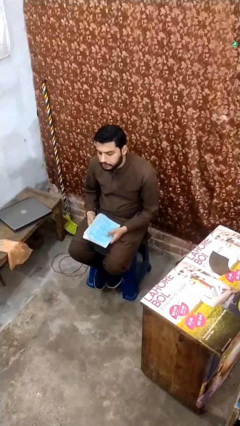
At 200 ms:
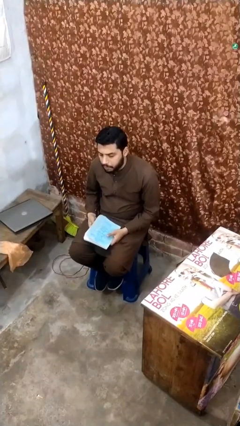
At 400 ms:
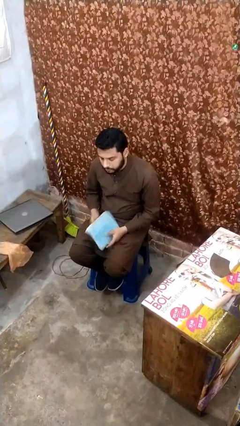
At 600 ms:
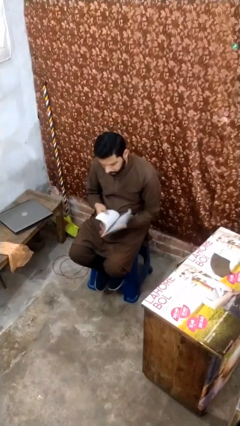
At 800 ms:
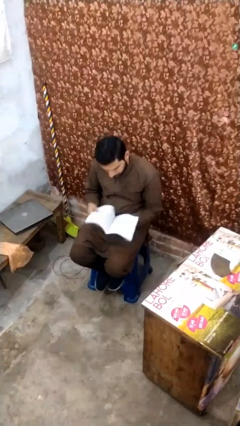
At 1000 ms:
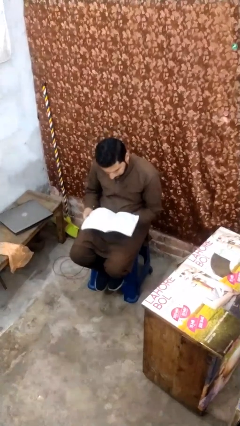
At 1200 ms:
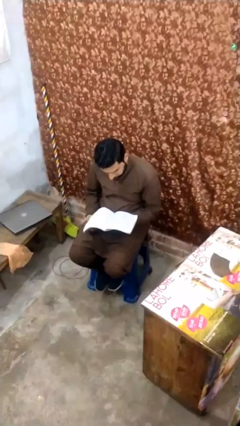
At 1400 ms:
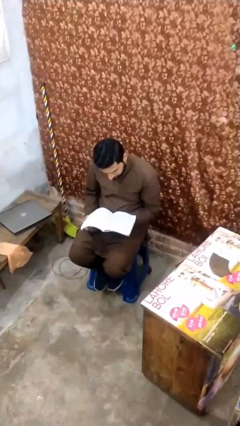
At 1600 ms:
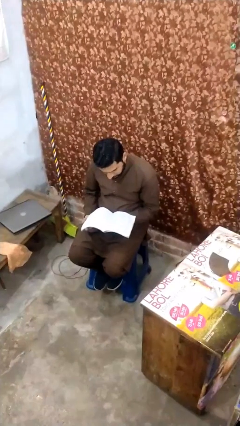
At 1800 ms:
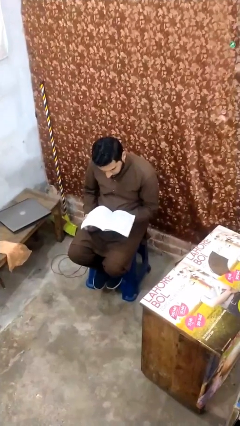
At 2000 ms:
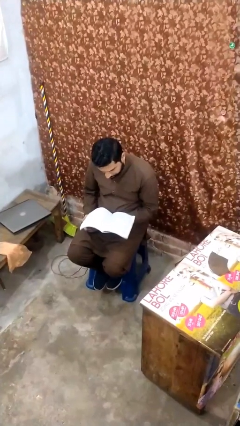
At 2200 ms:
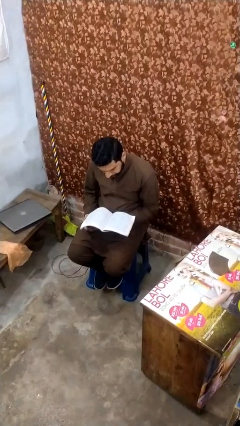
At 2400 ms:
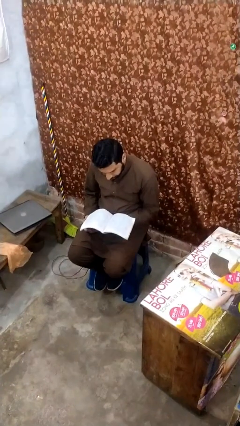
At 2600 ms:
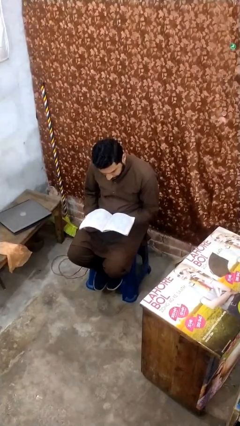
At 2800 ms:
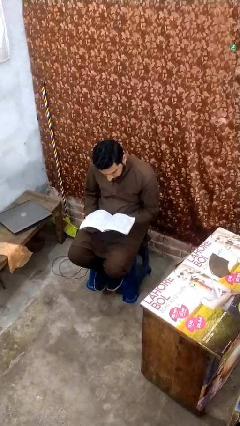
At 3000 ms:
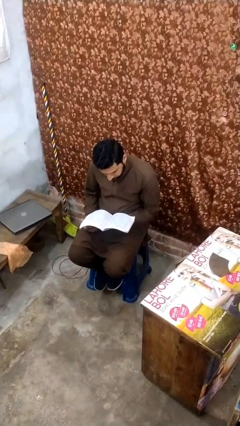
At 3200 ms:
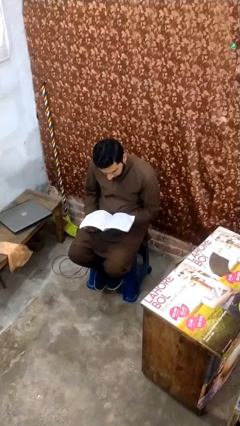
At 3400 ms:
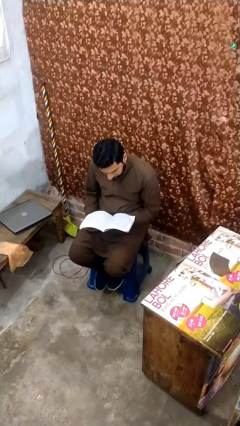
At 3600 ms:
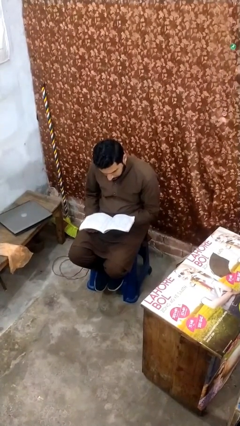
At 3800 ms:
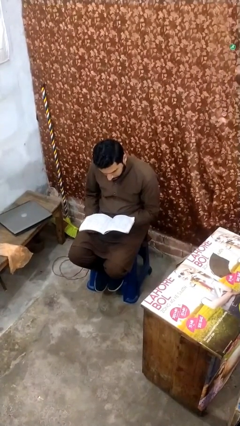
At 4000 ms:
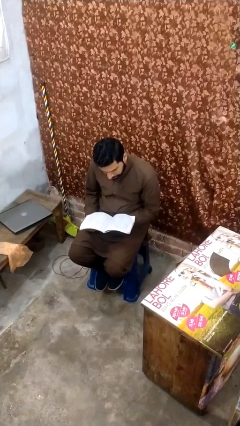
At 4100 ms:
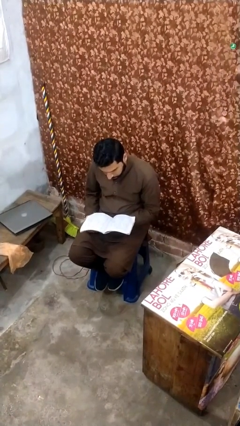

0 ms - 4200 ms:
person reads document

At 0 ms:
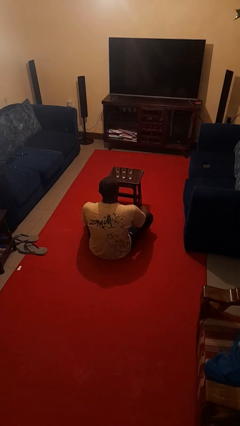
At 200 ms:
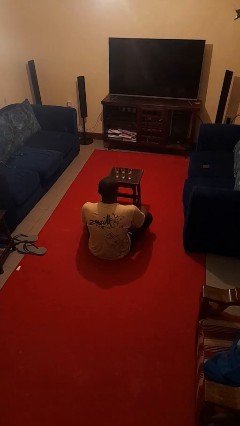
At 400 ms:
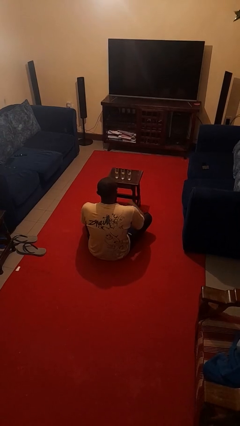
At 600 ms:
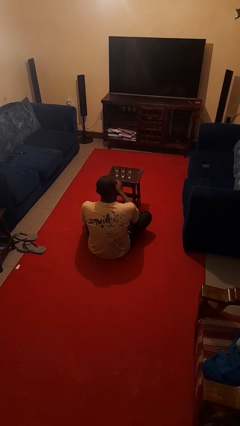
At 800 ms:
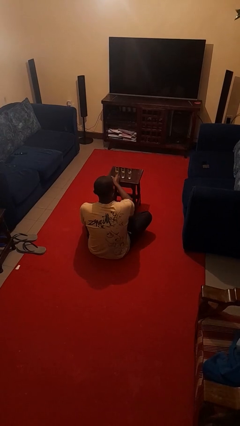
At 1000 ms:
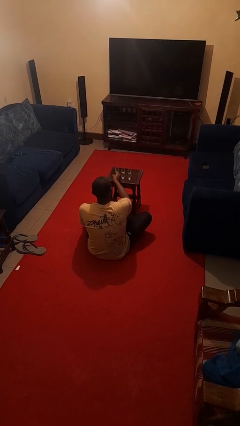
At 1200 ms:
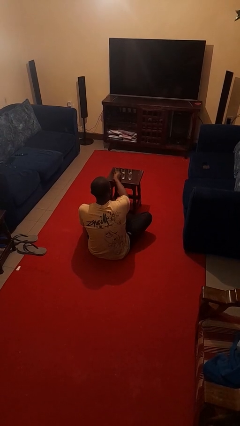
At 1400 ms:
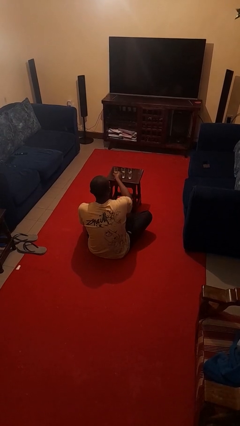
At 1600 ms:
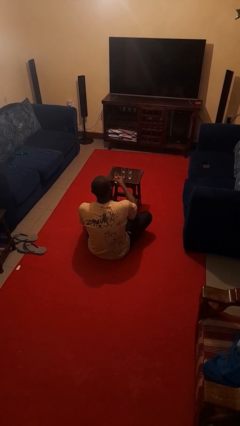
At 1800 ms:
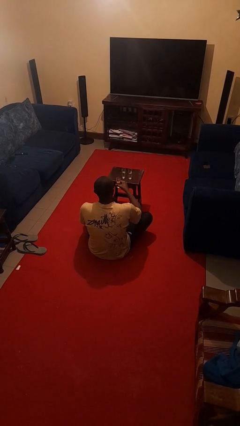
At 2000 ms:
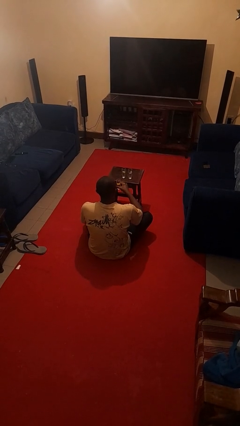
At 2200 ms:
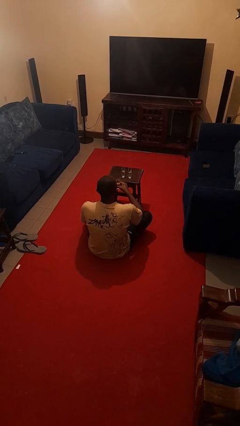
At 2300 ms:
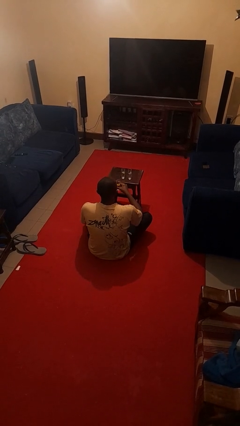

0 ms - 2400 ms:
person picks up object from table

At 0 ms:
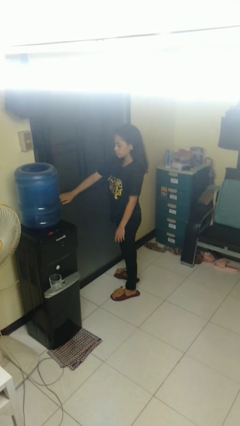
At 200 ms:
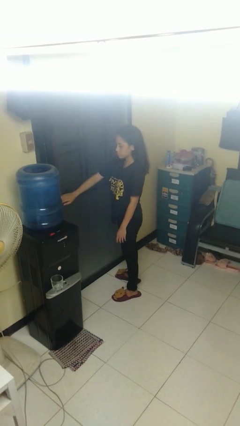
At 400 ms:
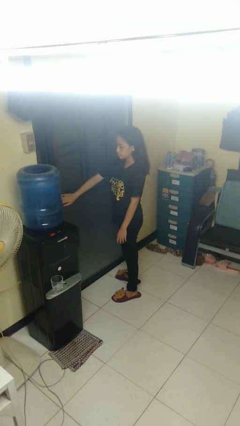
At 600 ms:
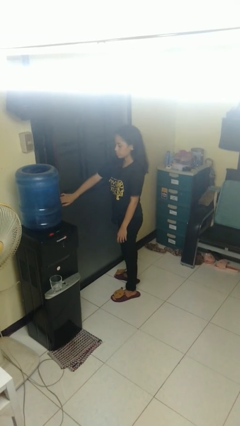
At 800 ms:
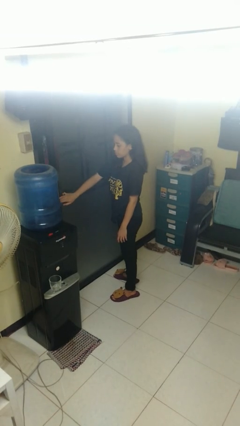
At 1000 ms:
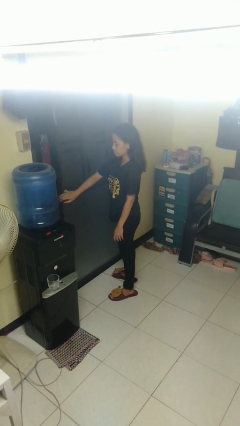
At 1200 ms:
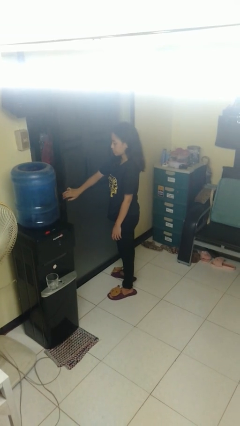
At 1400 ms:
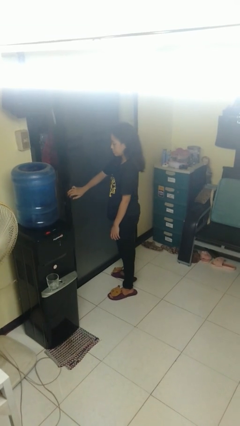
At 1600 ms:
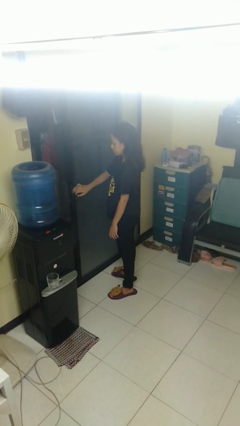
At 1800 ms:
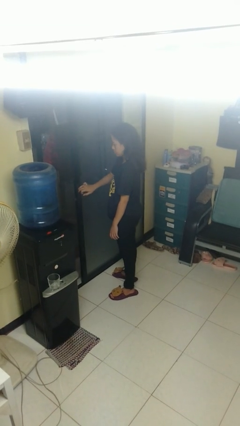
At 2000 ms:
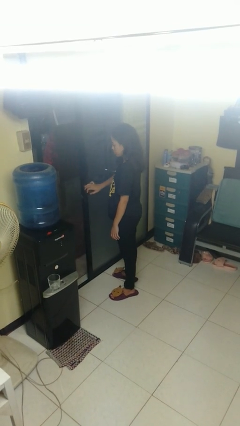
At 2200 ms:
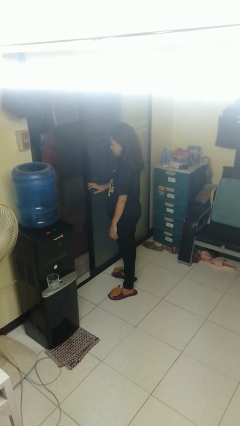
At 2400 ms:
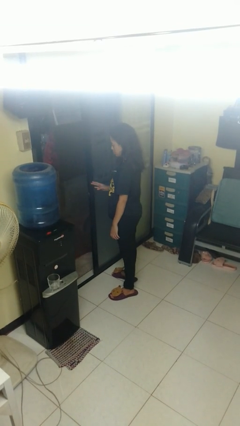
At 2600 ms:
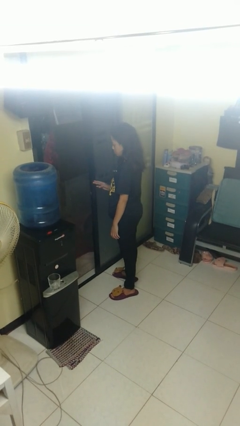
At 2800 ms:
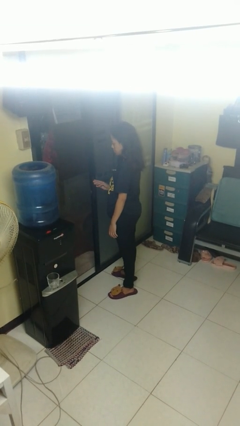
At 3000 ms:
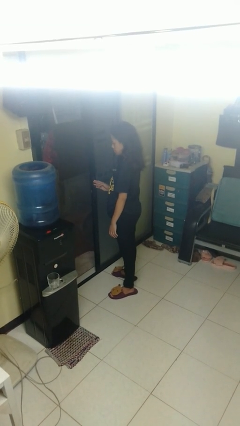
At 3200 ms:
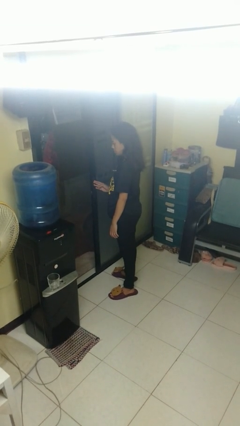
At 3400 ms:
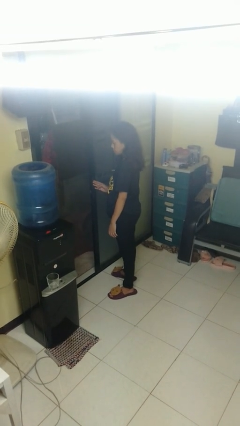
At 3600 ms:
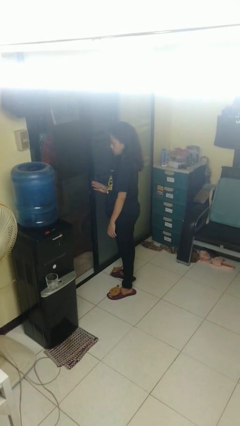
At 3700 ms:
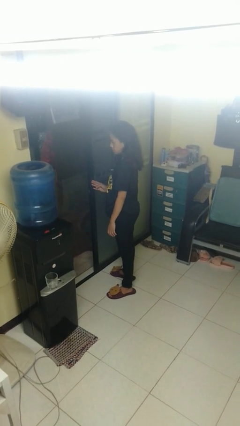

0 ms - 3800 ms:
person opens sliding door

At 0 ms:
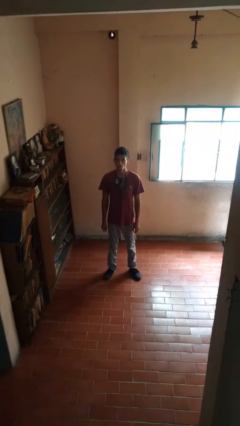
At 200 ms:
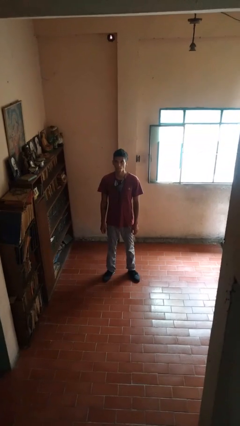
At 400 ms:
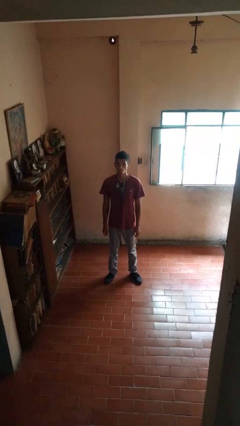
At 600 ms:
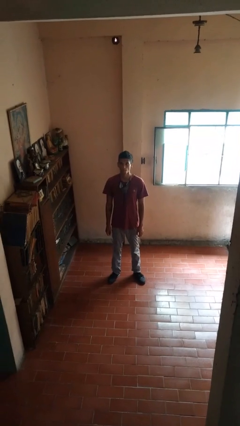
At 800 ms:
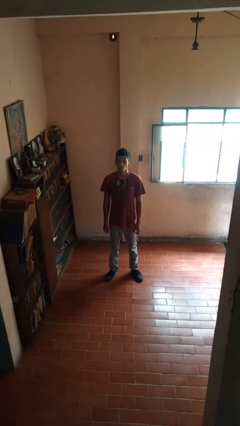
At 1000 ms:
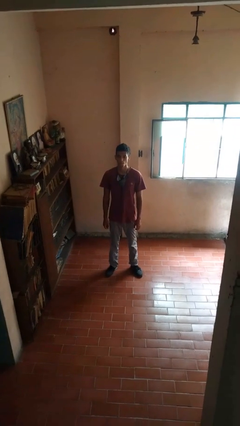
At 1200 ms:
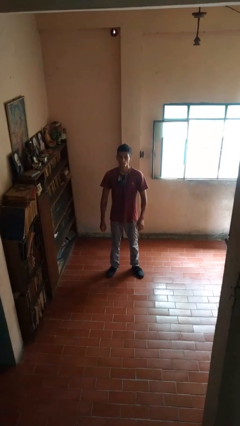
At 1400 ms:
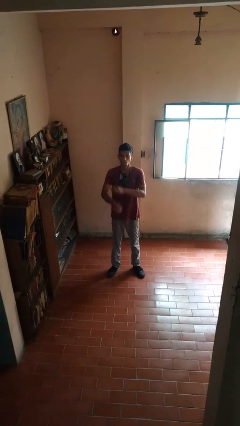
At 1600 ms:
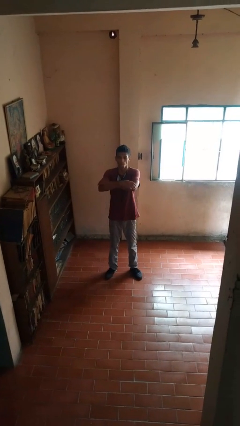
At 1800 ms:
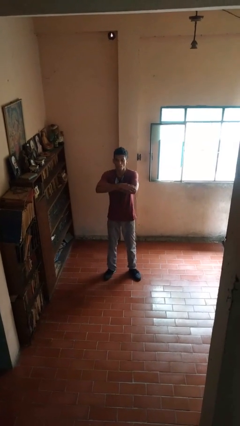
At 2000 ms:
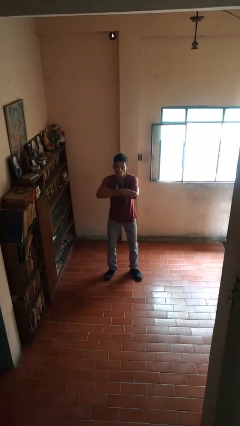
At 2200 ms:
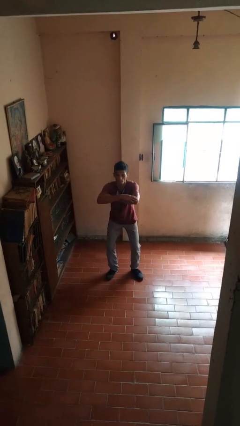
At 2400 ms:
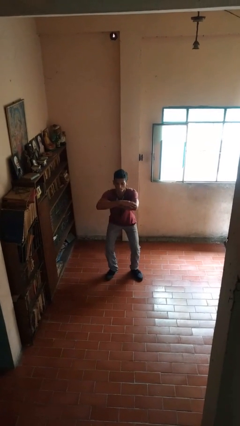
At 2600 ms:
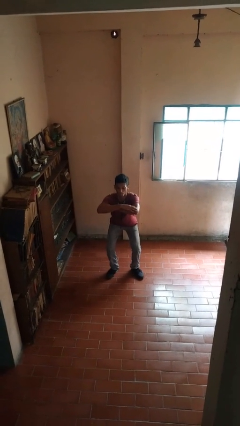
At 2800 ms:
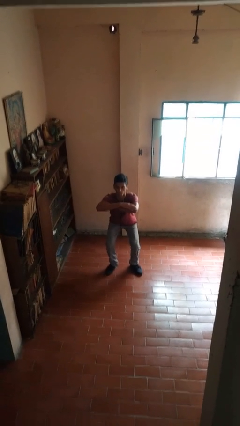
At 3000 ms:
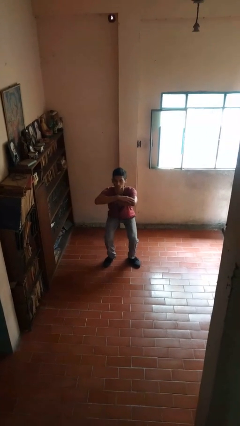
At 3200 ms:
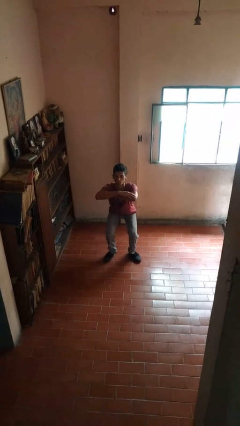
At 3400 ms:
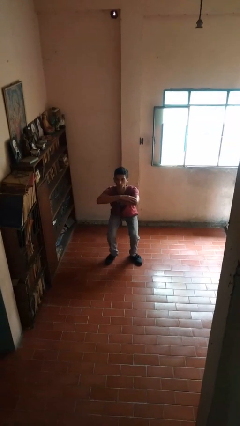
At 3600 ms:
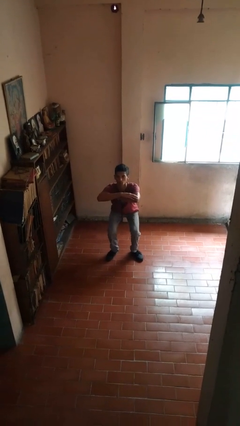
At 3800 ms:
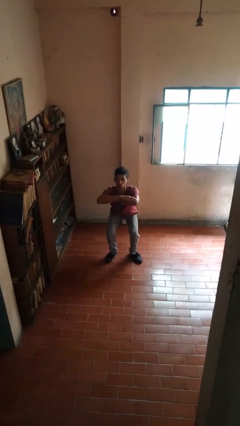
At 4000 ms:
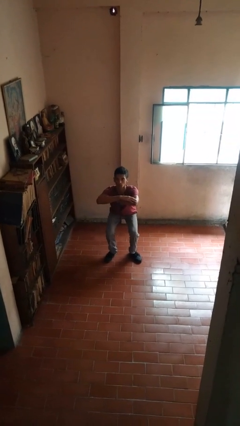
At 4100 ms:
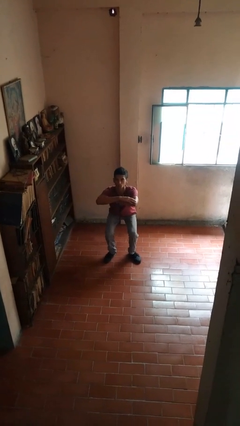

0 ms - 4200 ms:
person squats

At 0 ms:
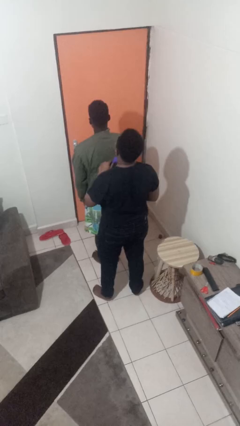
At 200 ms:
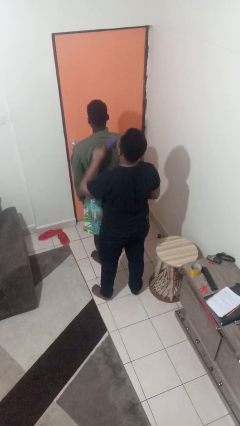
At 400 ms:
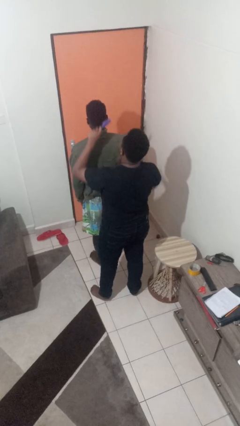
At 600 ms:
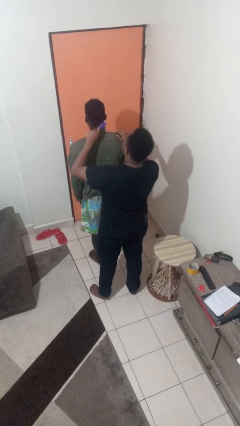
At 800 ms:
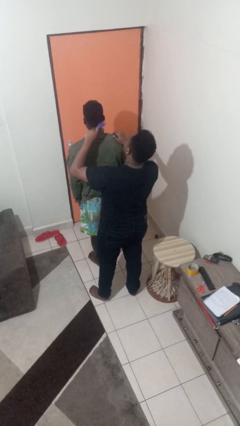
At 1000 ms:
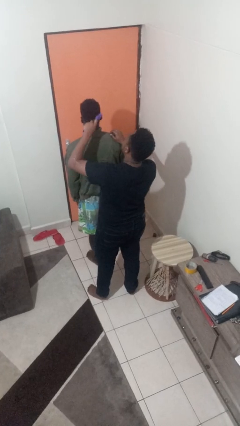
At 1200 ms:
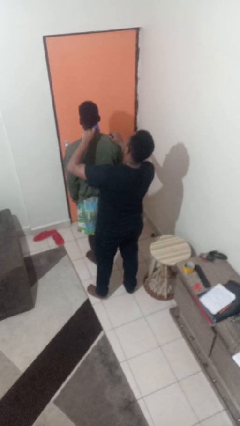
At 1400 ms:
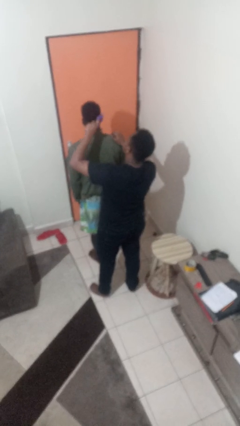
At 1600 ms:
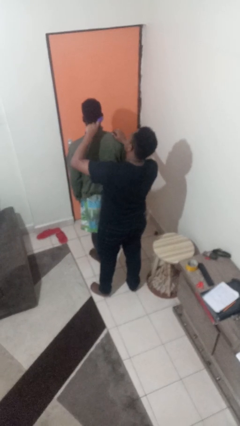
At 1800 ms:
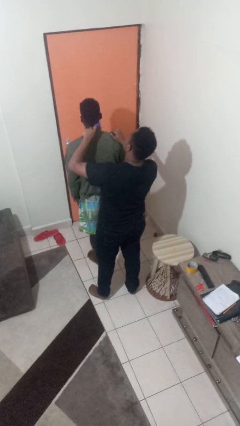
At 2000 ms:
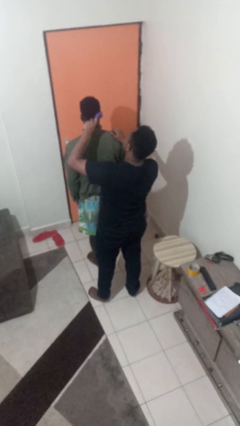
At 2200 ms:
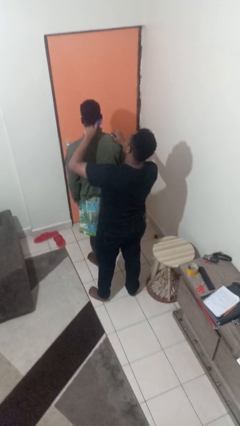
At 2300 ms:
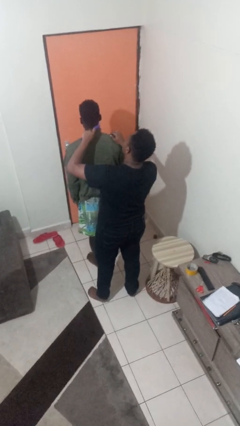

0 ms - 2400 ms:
person brushes hair of person

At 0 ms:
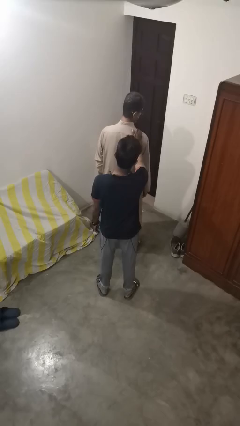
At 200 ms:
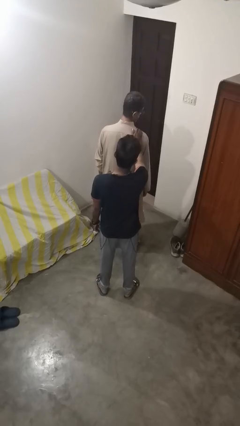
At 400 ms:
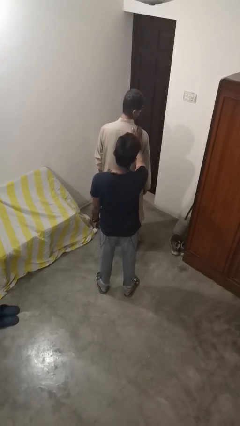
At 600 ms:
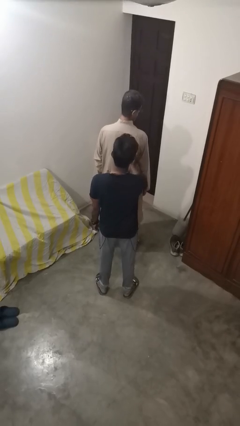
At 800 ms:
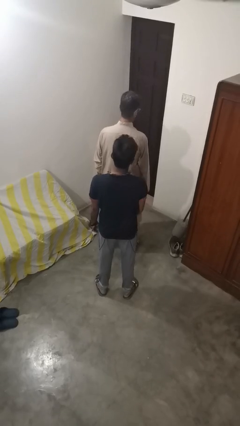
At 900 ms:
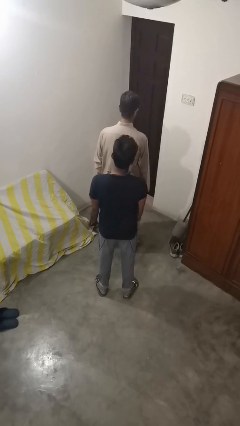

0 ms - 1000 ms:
person spins person around
